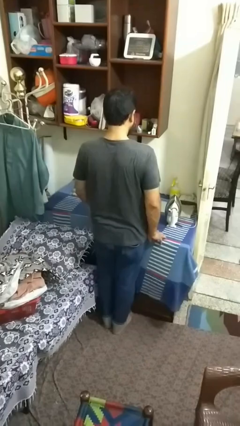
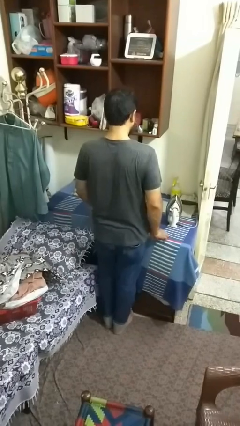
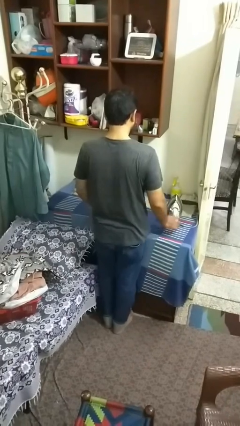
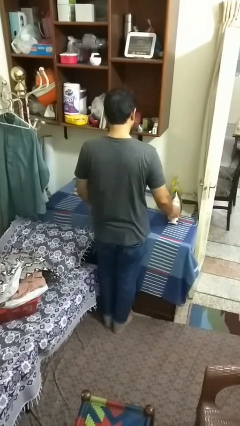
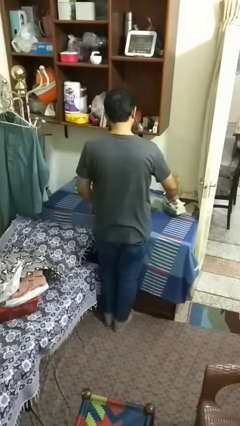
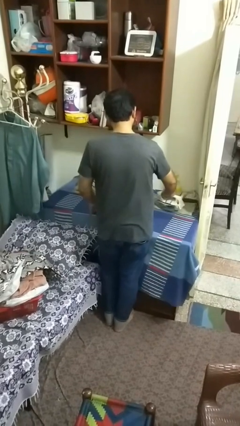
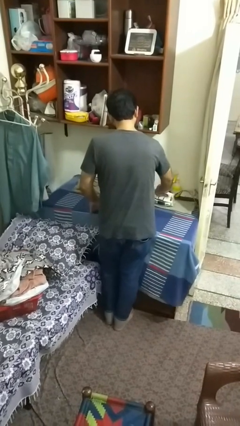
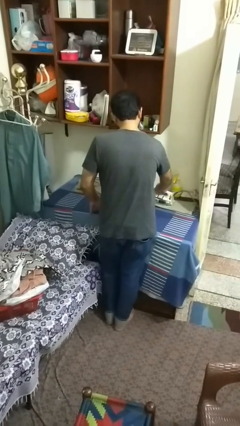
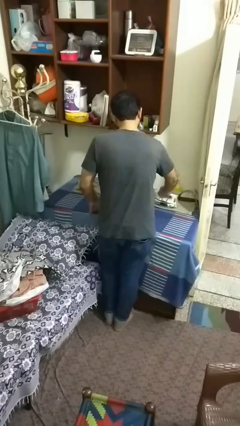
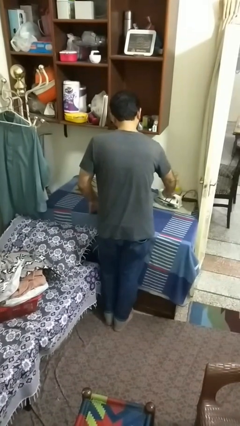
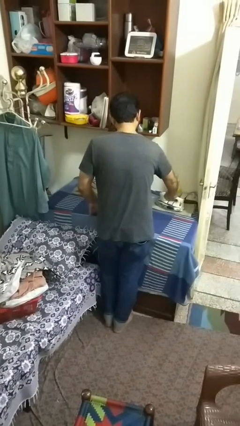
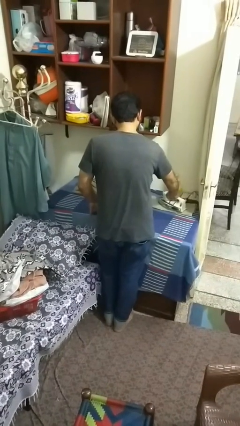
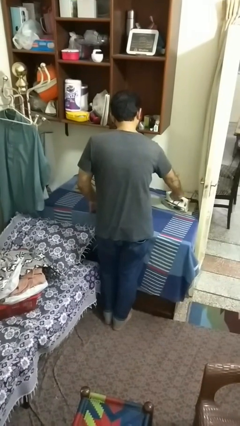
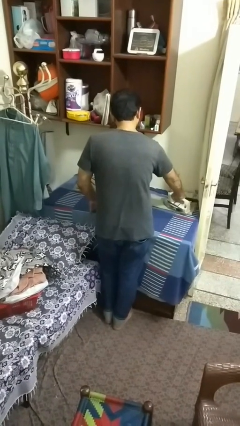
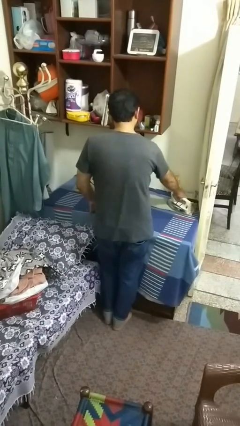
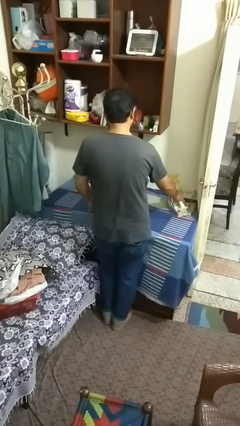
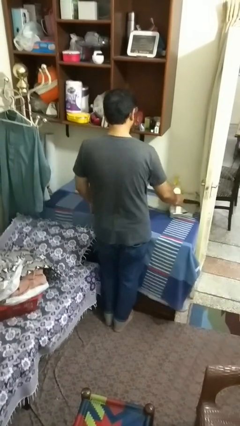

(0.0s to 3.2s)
person irons clothes

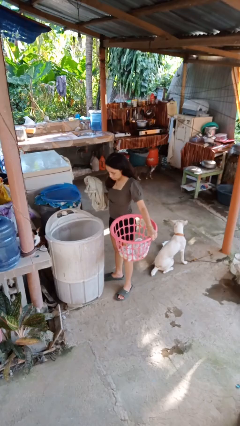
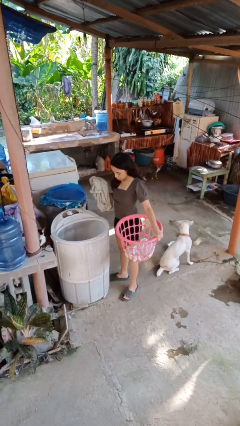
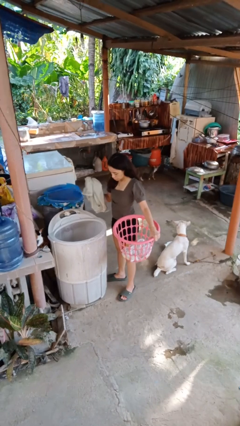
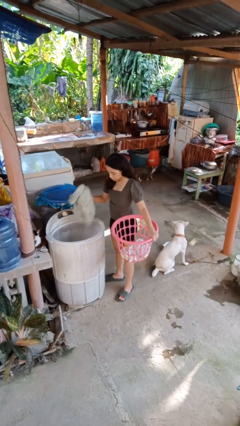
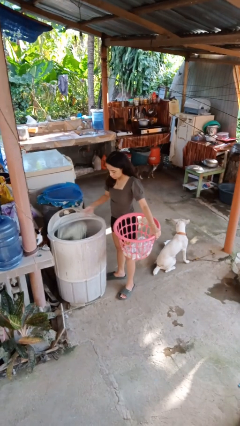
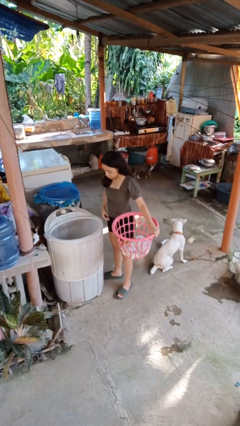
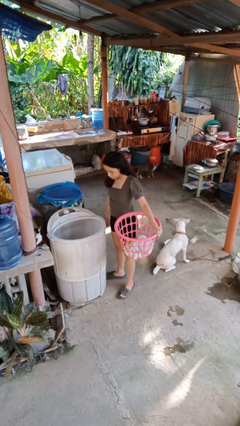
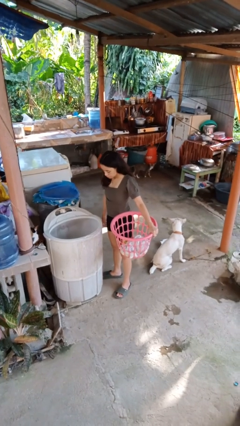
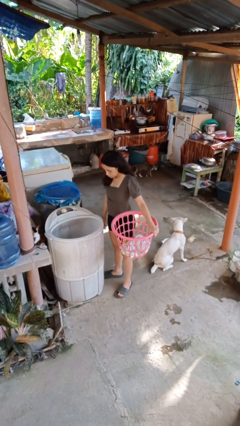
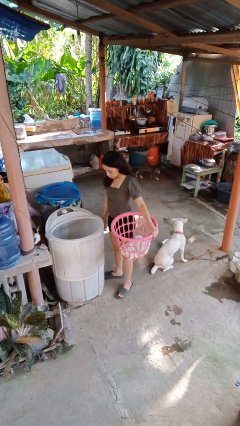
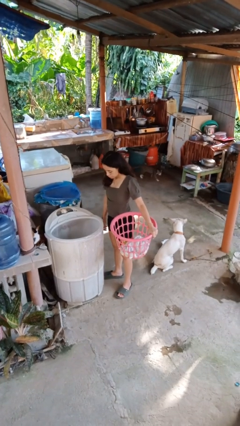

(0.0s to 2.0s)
person loads dryer

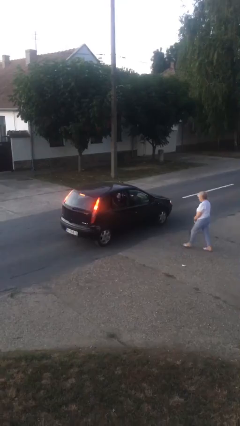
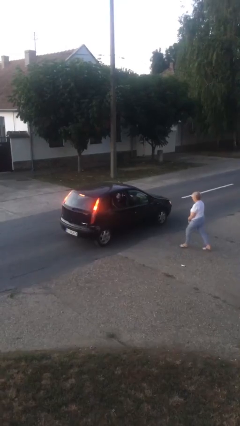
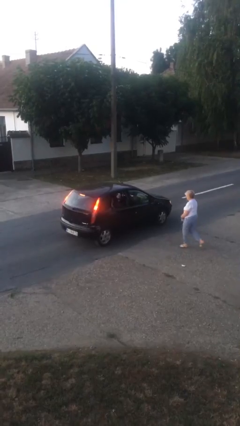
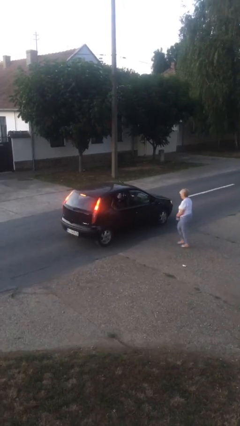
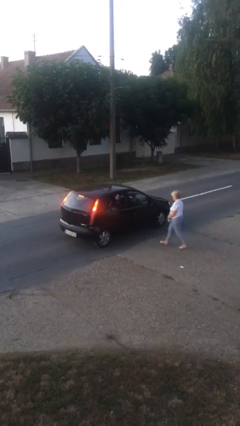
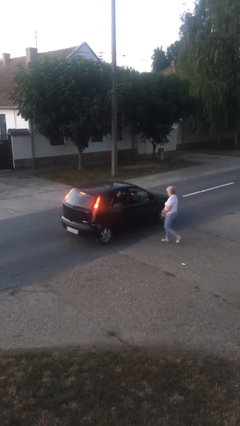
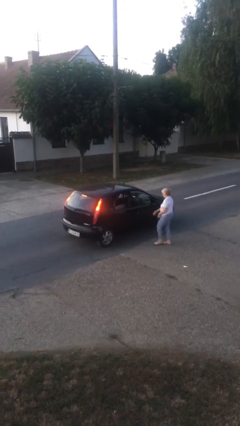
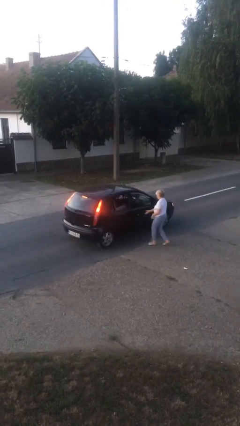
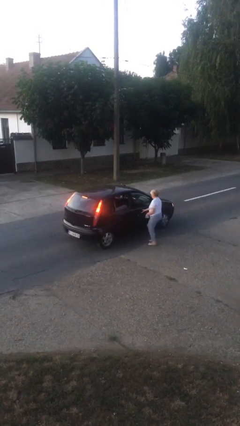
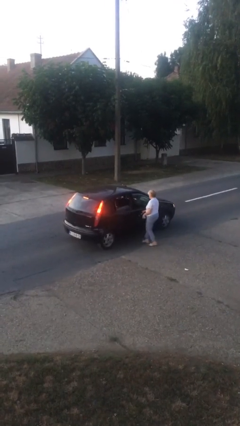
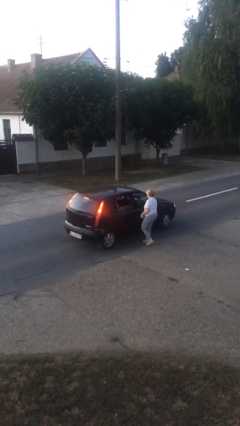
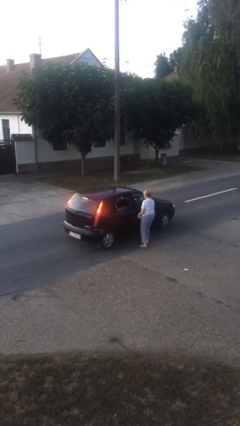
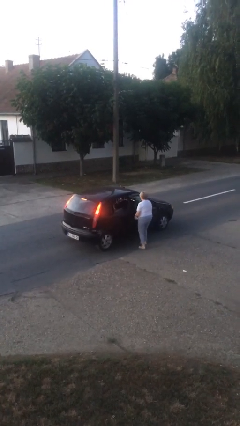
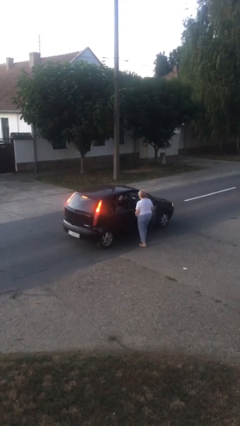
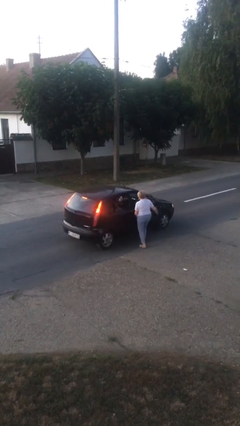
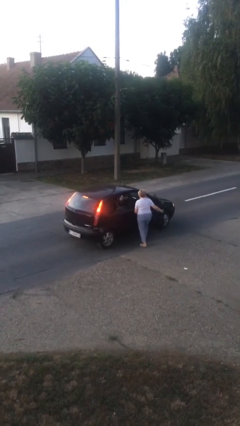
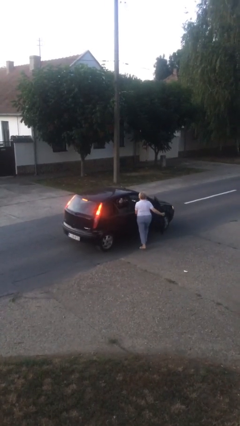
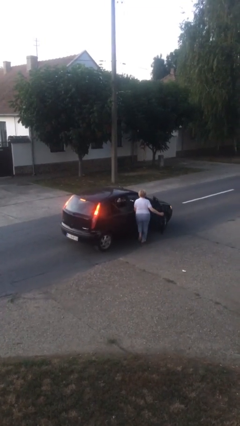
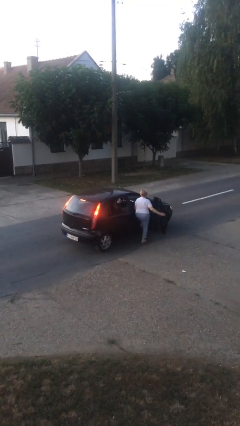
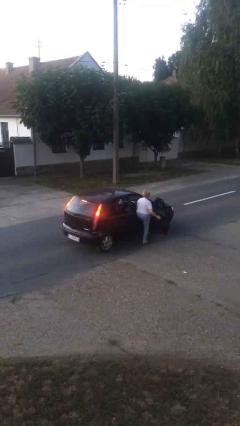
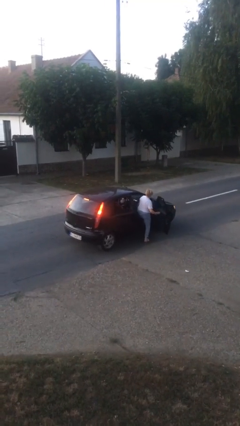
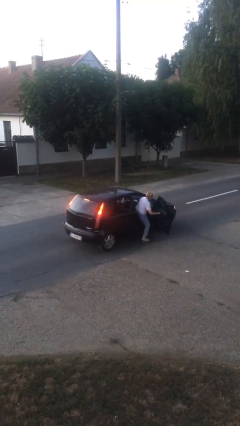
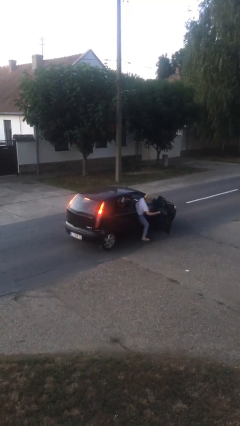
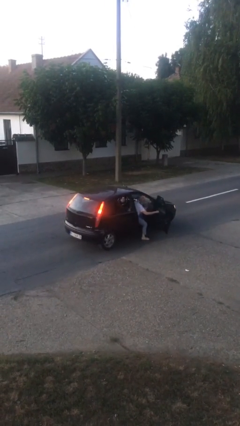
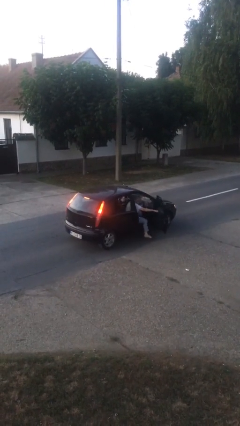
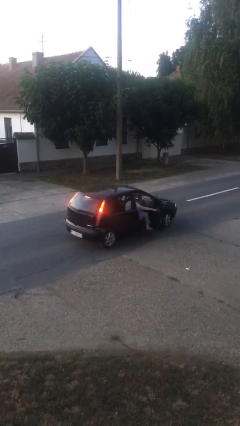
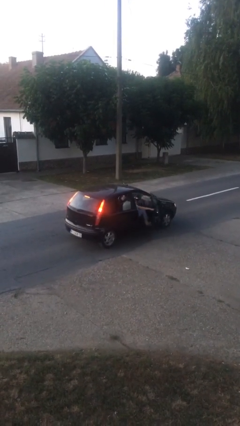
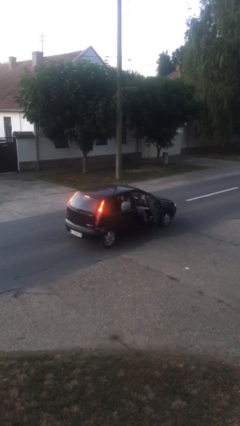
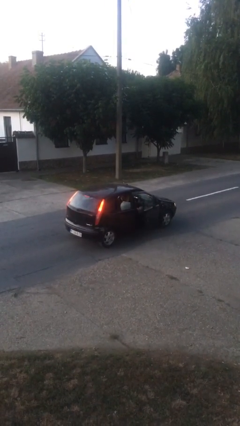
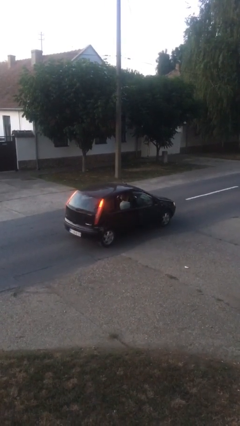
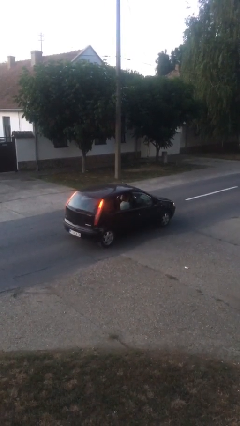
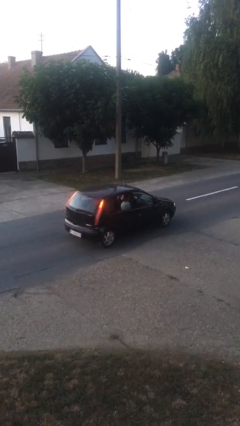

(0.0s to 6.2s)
car picks up person

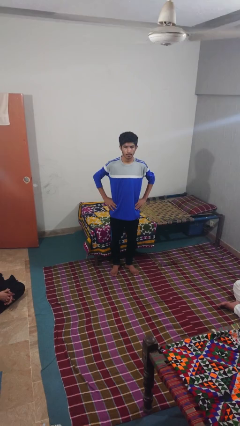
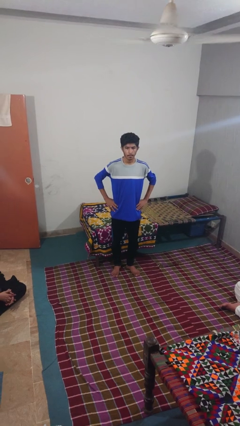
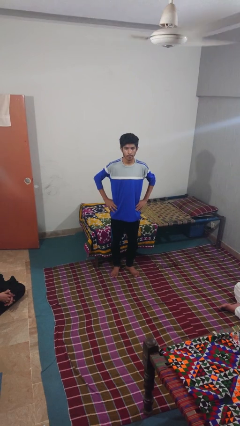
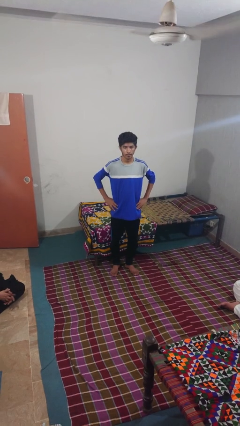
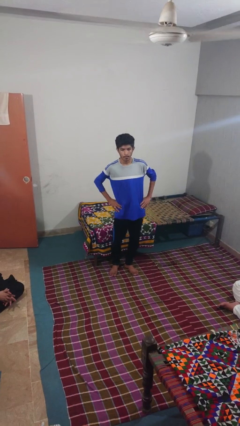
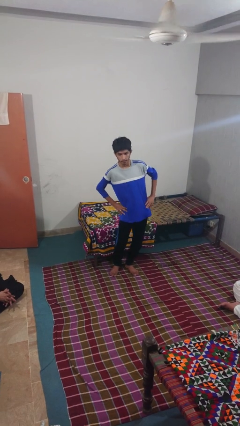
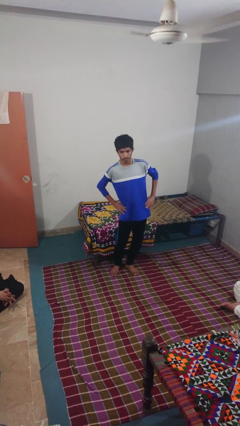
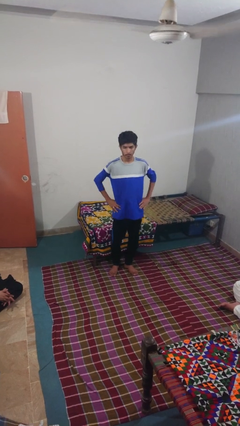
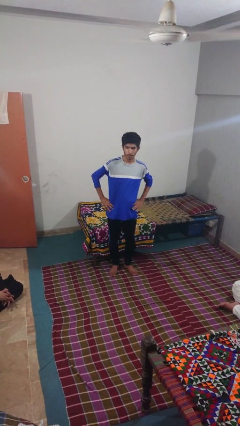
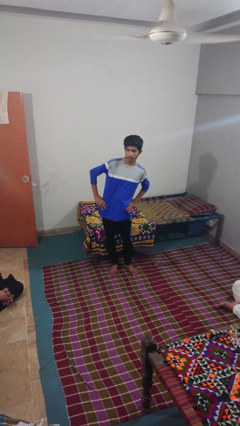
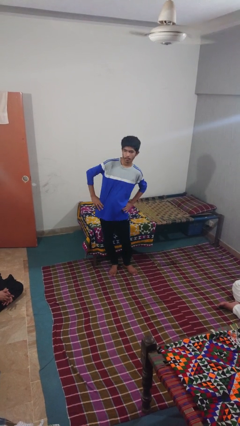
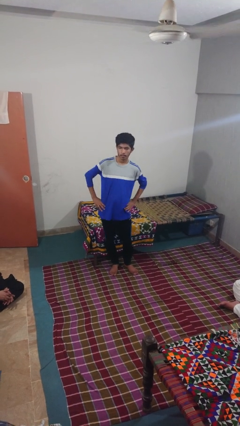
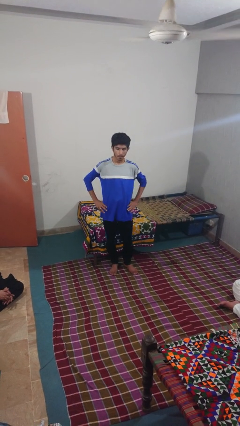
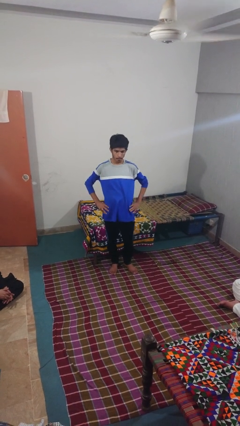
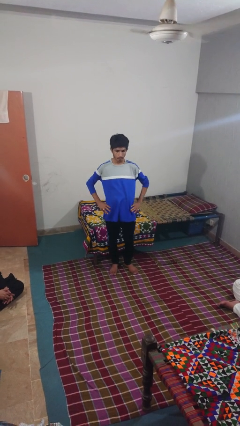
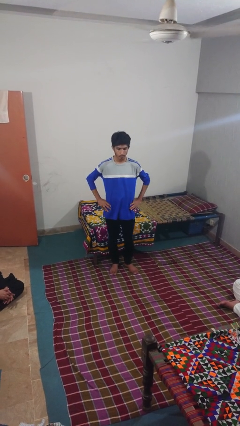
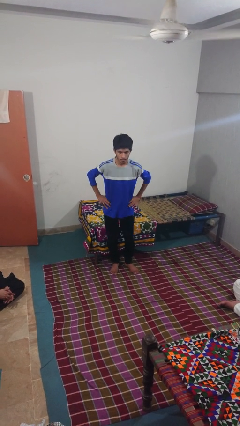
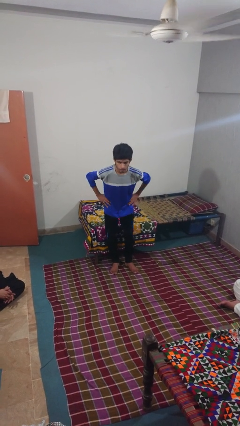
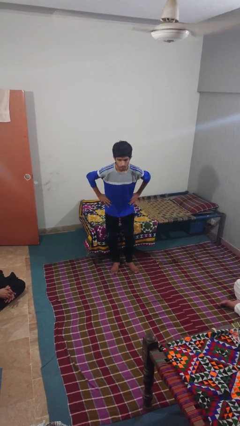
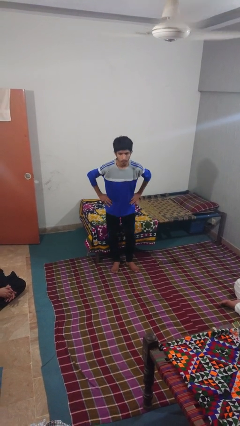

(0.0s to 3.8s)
person wiggles hips

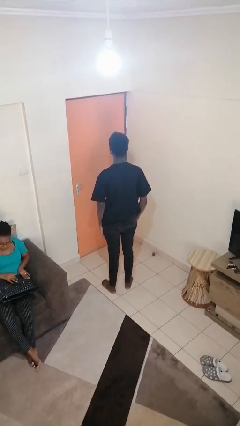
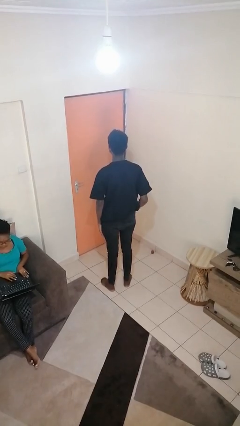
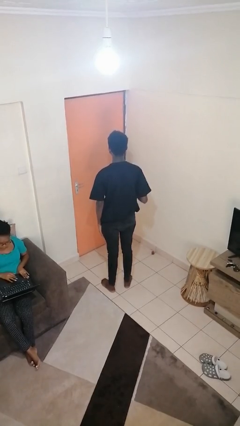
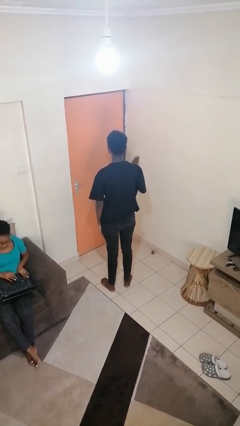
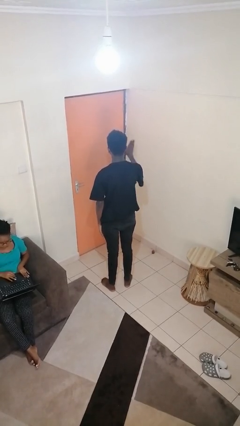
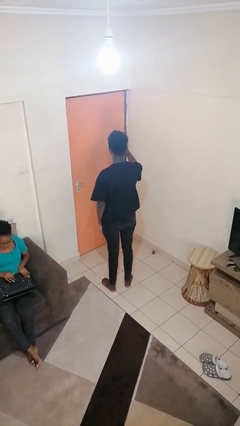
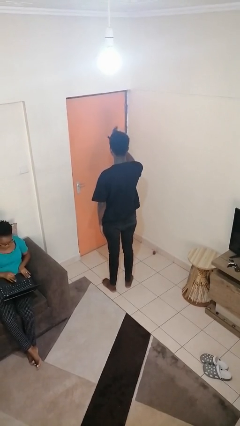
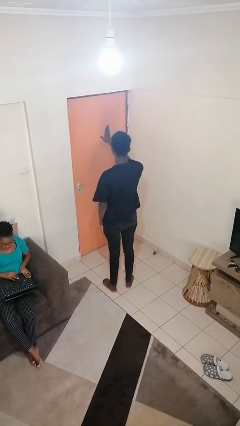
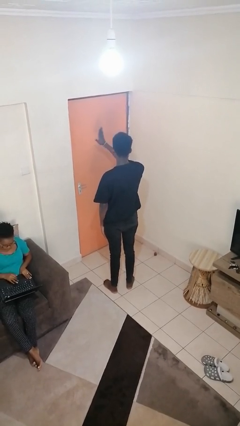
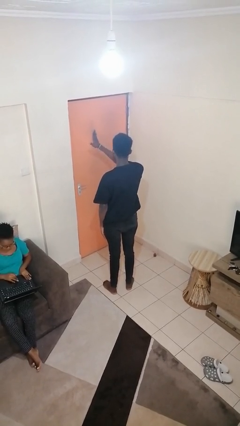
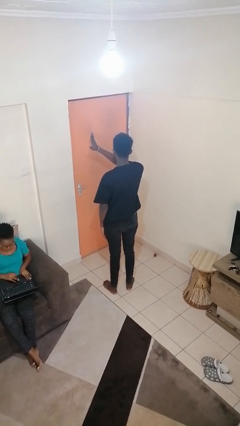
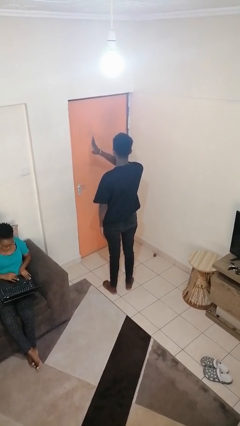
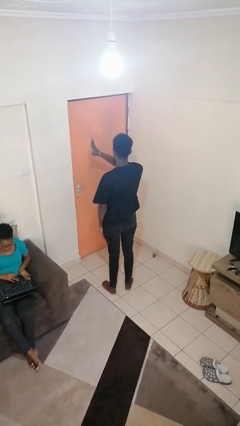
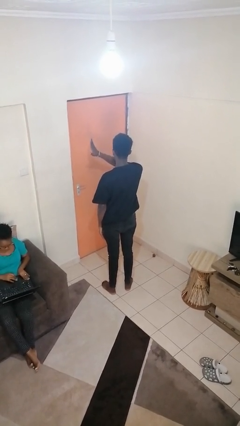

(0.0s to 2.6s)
person gestures swipe left
